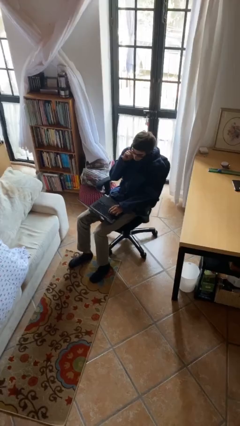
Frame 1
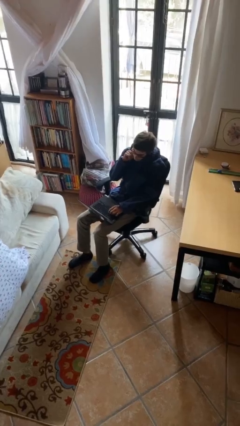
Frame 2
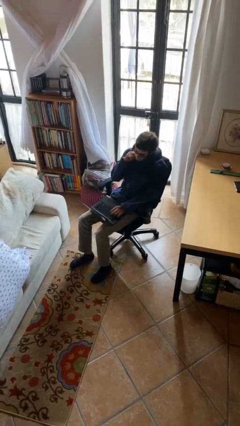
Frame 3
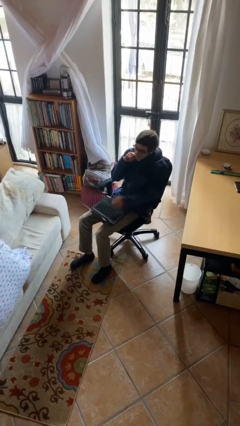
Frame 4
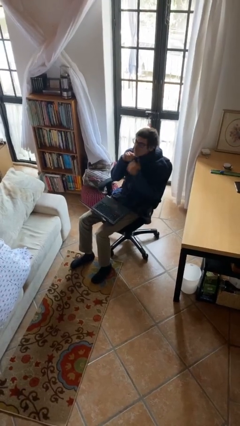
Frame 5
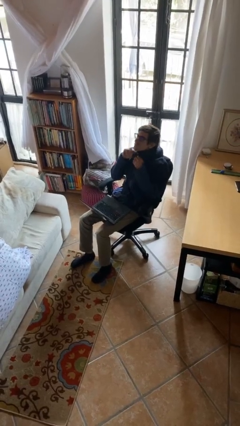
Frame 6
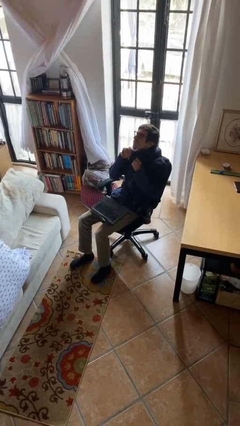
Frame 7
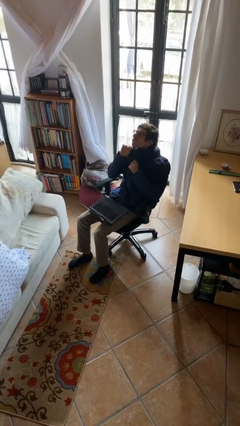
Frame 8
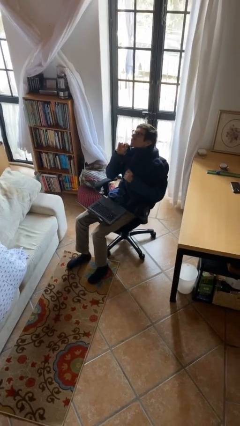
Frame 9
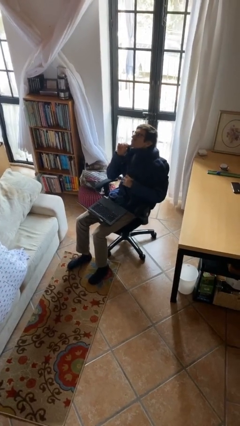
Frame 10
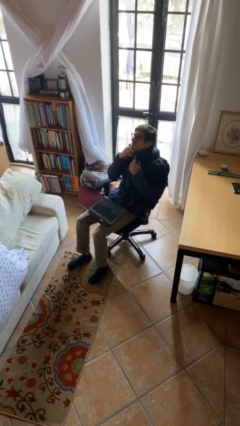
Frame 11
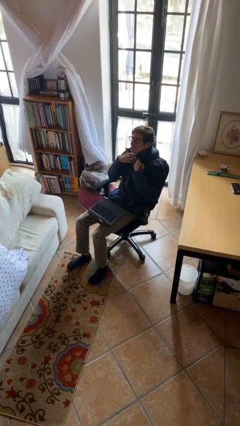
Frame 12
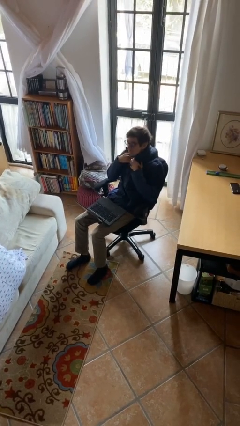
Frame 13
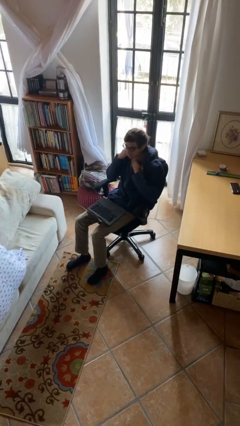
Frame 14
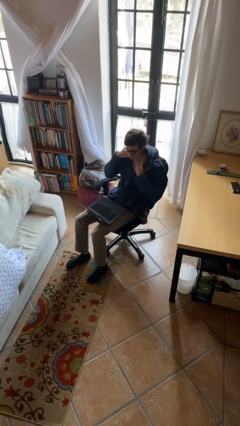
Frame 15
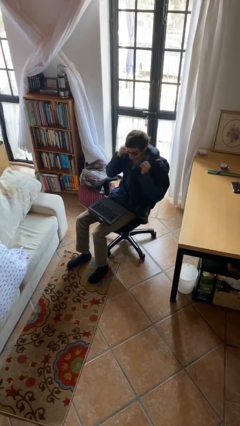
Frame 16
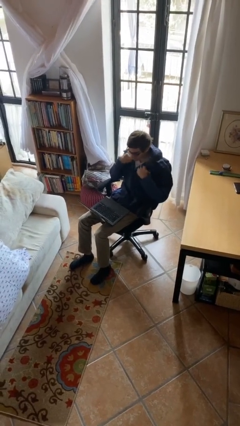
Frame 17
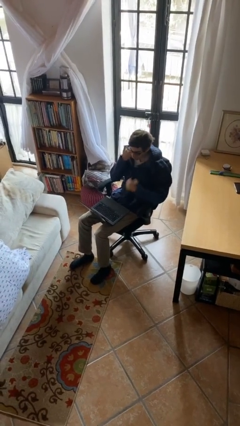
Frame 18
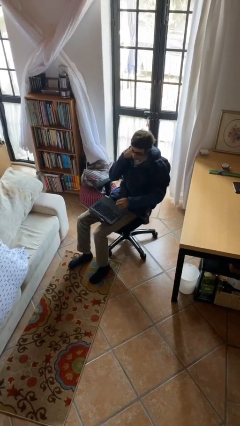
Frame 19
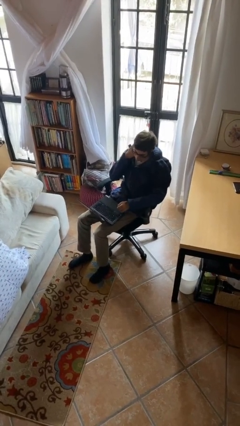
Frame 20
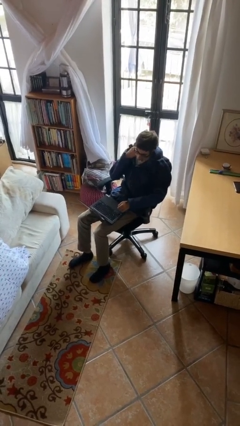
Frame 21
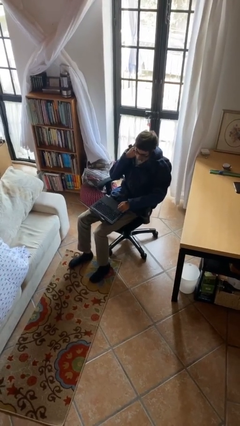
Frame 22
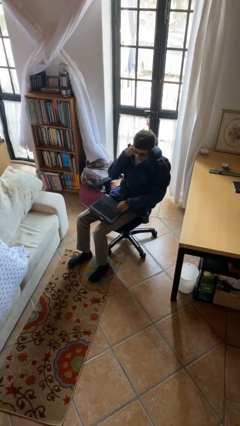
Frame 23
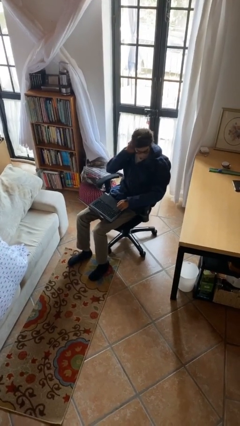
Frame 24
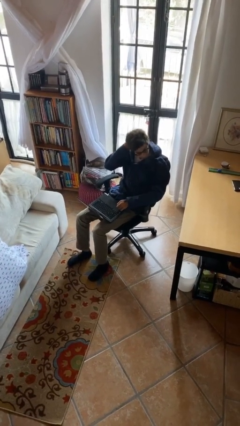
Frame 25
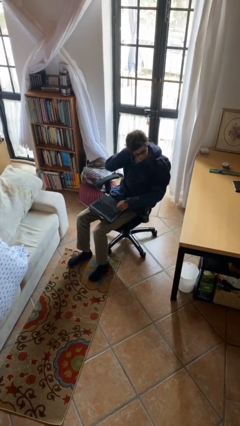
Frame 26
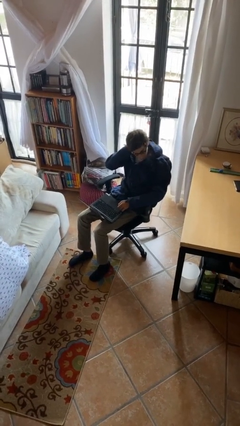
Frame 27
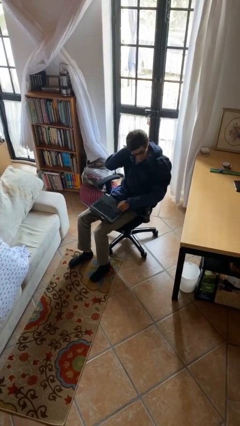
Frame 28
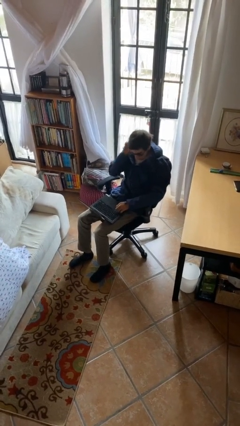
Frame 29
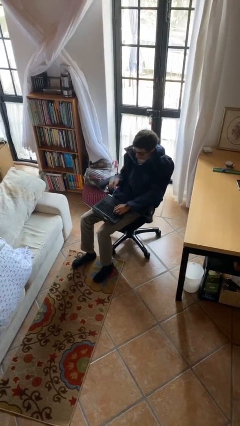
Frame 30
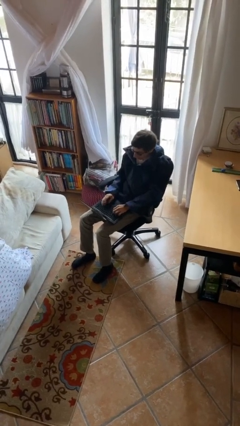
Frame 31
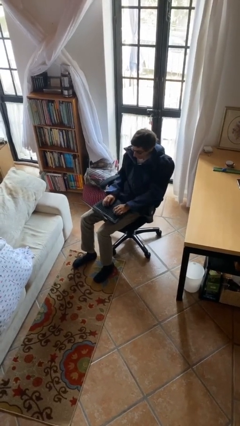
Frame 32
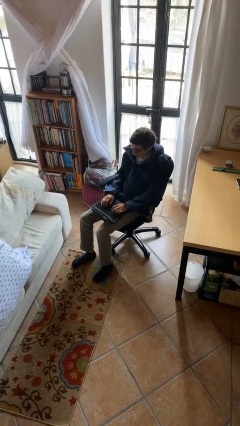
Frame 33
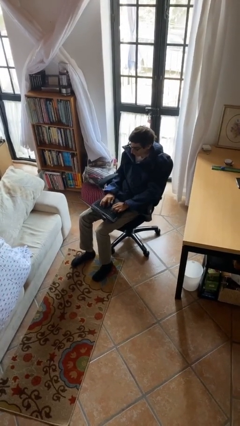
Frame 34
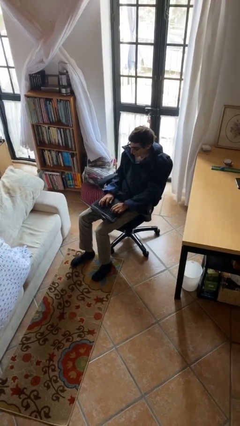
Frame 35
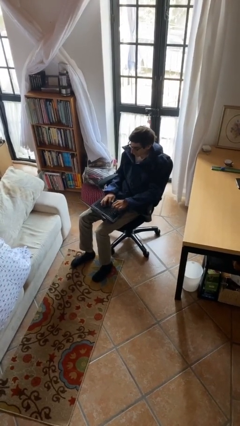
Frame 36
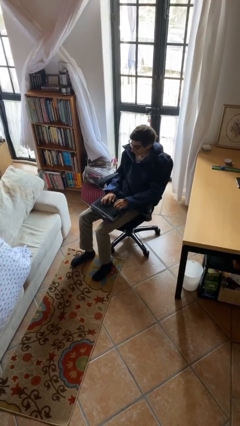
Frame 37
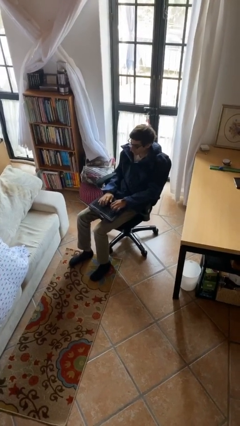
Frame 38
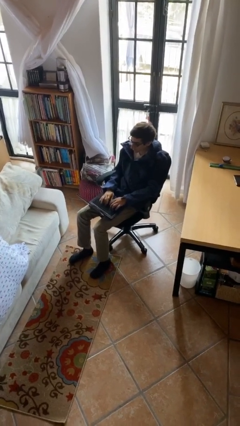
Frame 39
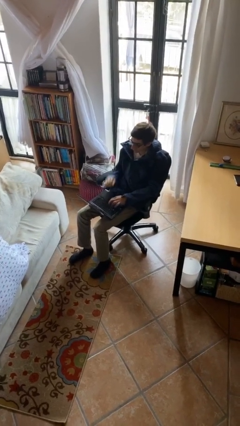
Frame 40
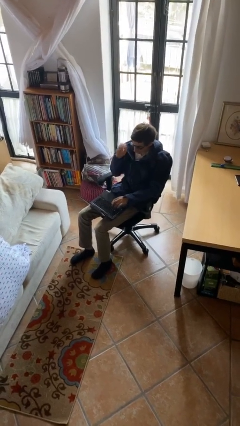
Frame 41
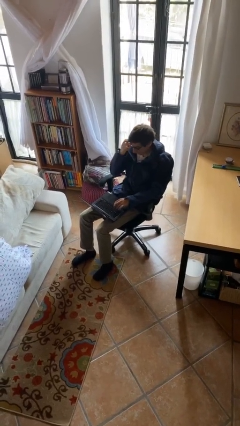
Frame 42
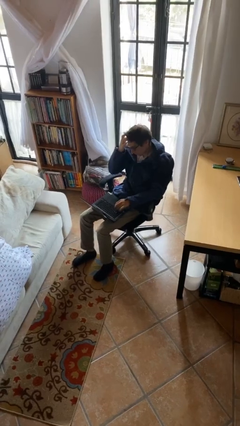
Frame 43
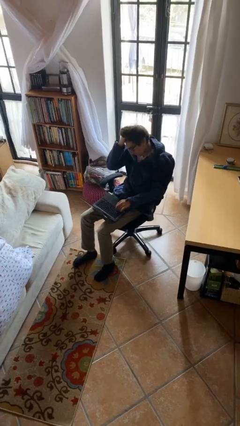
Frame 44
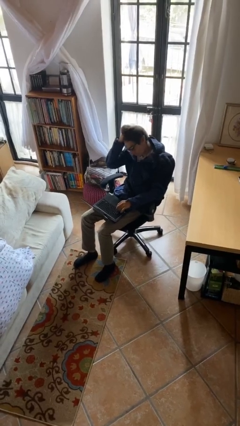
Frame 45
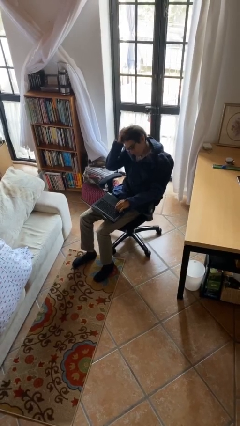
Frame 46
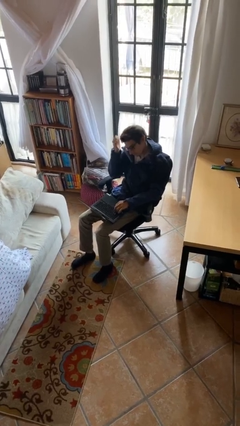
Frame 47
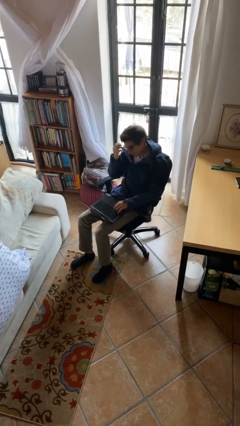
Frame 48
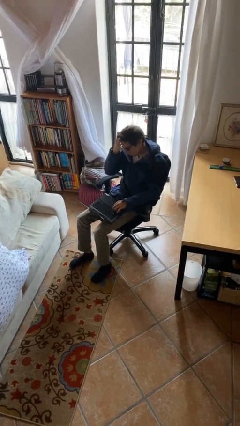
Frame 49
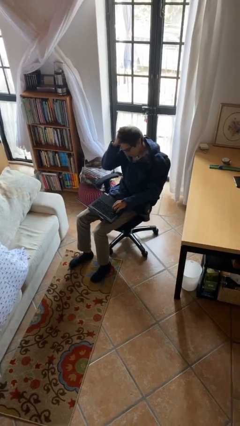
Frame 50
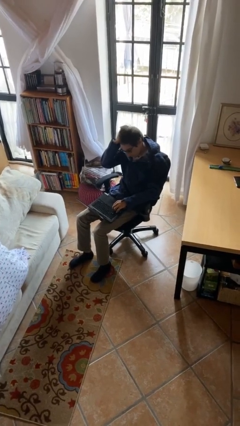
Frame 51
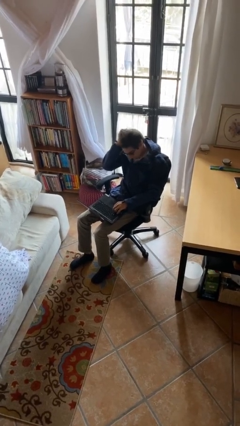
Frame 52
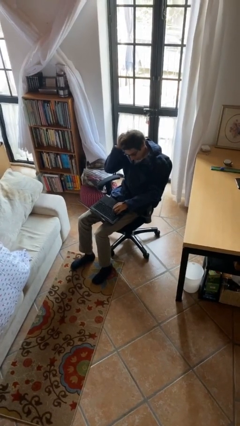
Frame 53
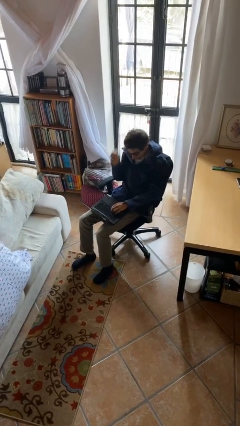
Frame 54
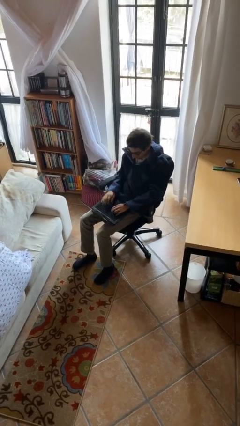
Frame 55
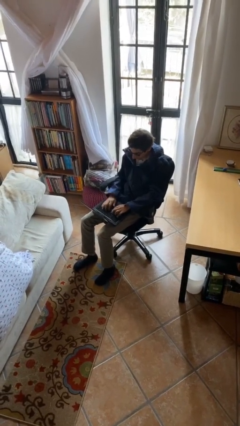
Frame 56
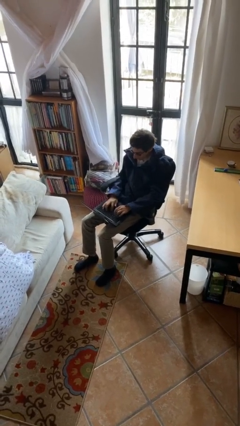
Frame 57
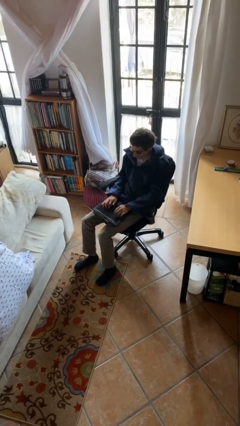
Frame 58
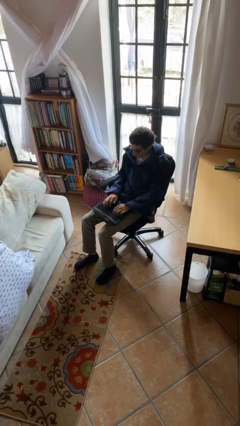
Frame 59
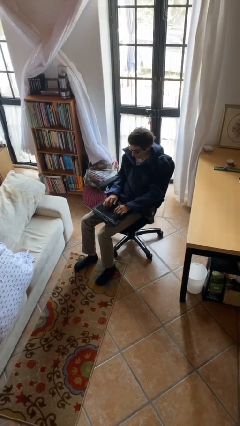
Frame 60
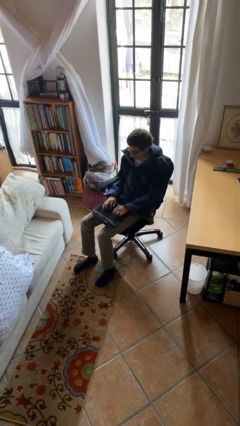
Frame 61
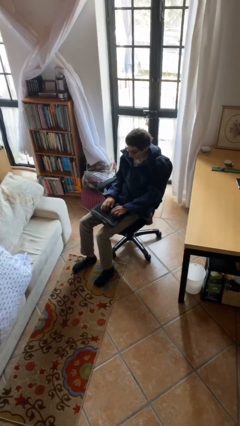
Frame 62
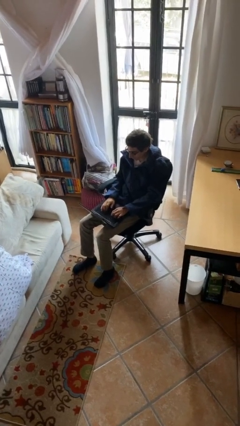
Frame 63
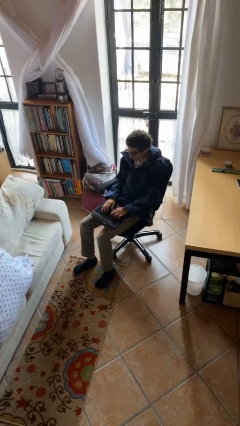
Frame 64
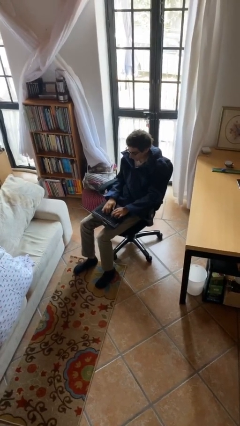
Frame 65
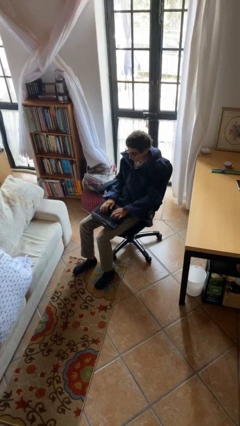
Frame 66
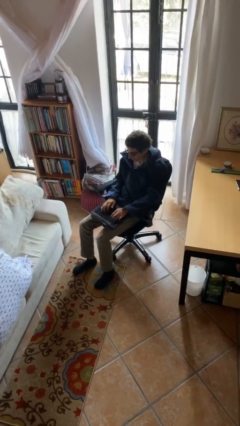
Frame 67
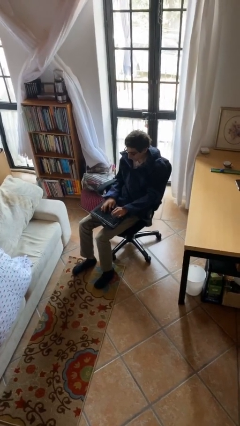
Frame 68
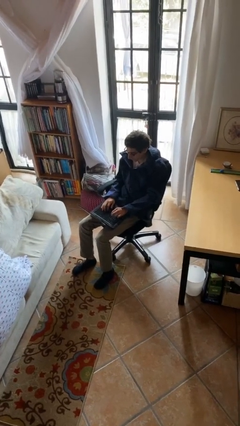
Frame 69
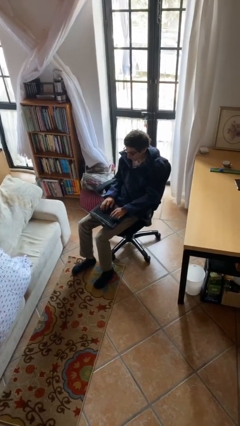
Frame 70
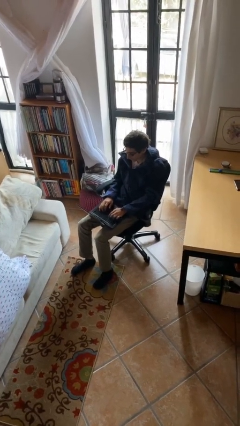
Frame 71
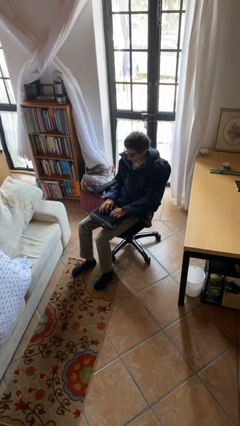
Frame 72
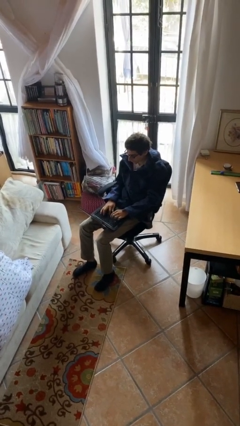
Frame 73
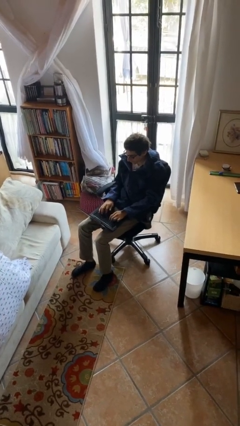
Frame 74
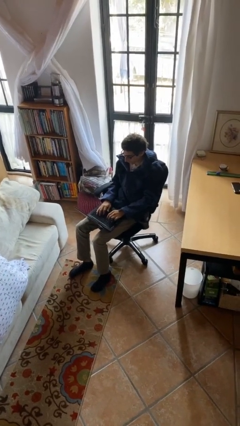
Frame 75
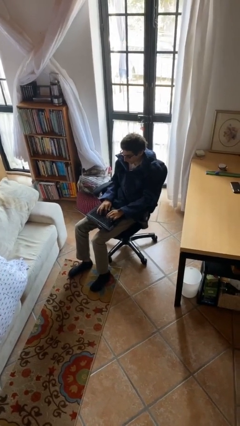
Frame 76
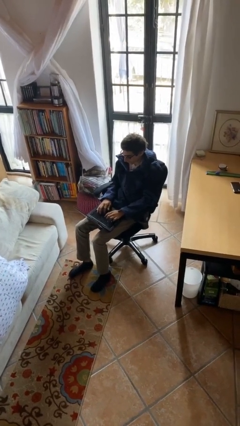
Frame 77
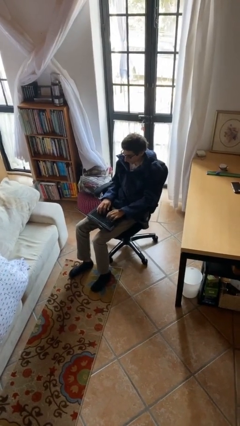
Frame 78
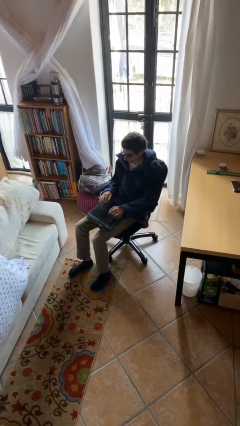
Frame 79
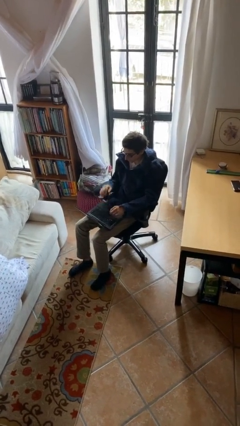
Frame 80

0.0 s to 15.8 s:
person interacts with laptop

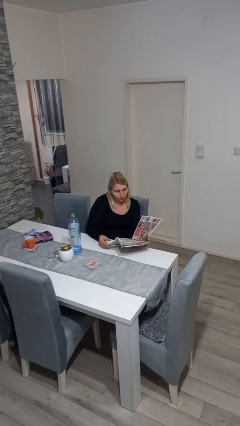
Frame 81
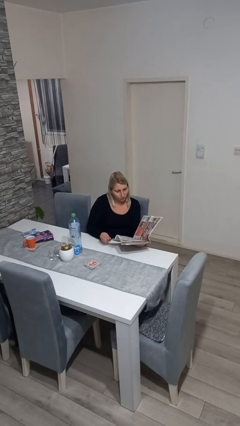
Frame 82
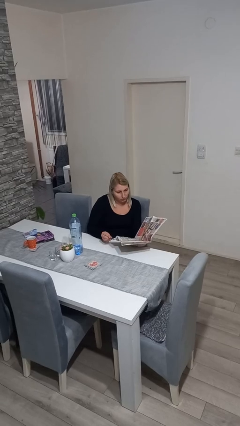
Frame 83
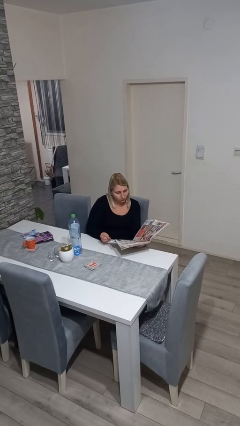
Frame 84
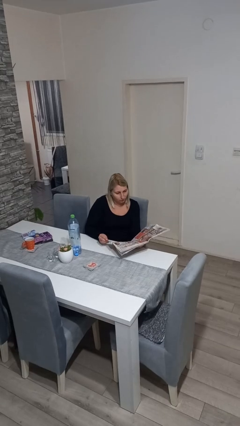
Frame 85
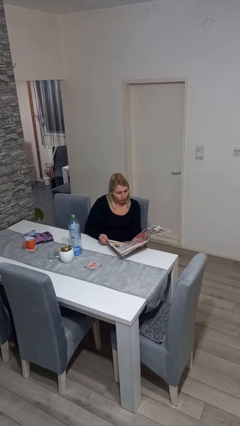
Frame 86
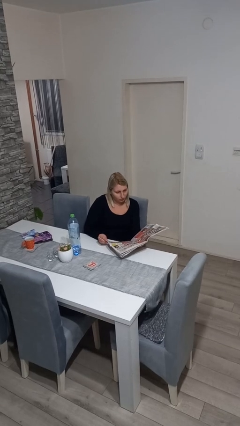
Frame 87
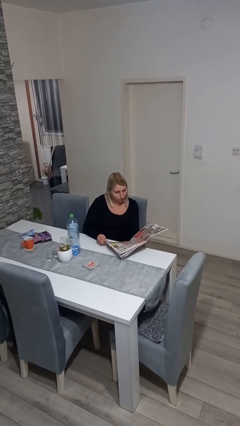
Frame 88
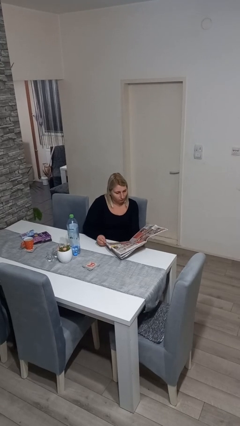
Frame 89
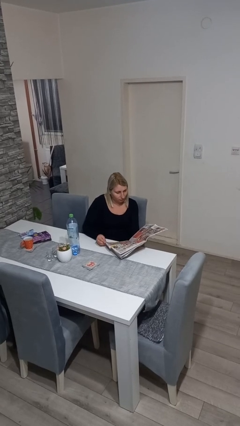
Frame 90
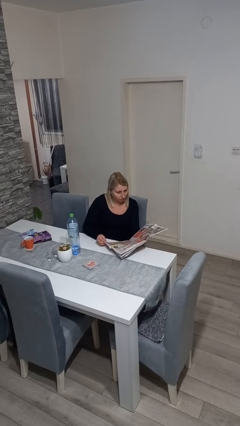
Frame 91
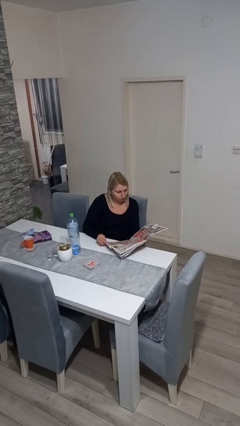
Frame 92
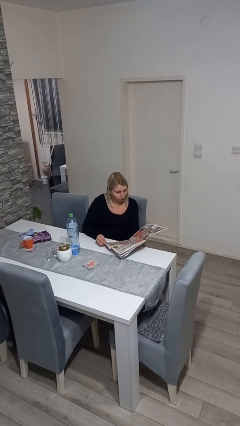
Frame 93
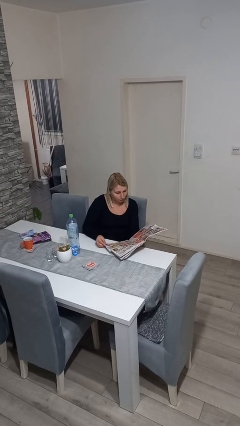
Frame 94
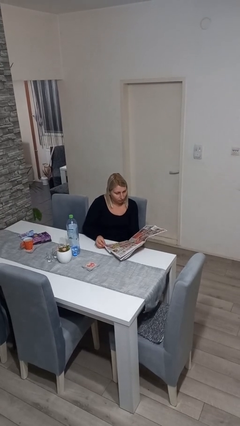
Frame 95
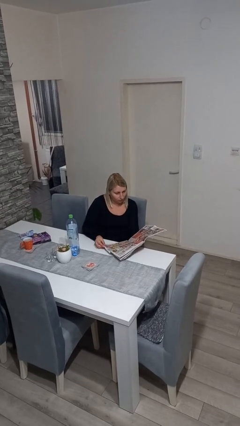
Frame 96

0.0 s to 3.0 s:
person reads newspaper
